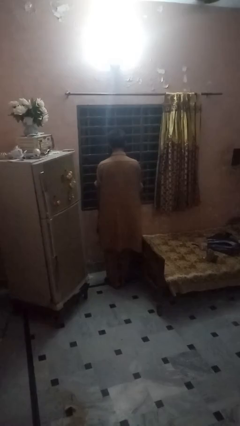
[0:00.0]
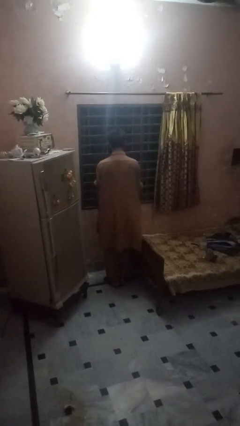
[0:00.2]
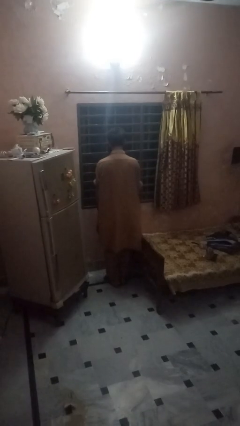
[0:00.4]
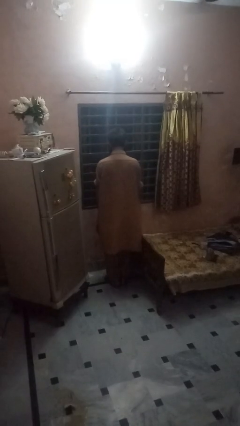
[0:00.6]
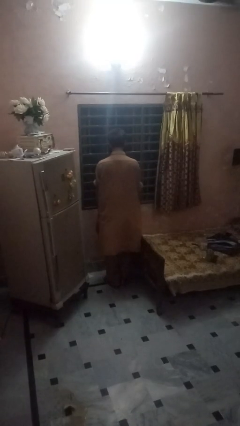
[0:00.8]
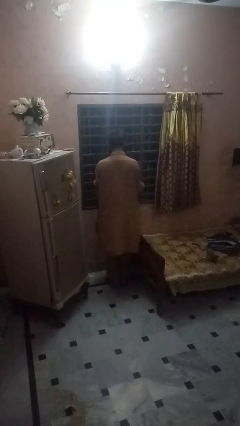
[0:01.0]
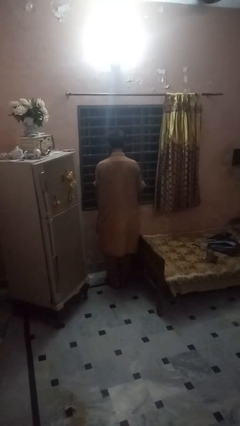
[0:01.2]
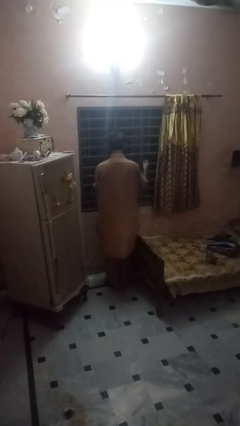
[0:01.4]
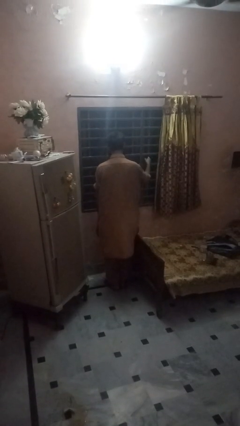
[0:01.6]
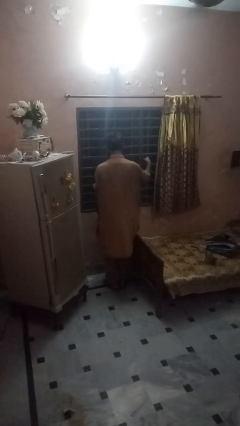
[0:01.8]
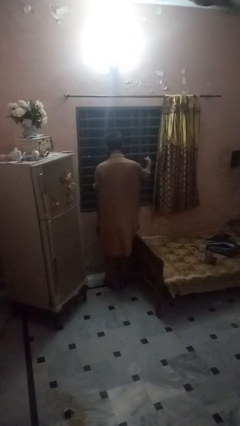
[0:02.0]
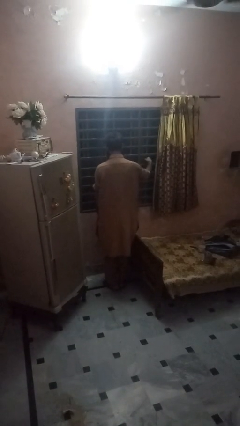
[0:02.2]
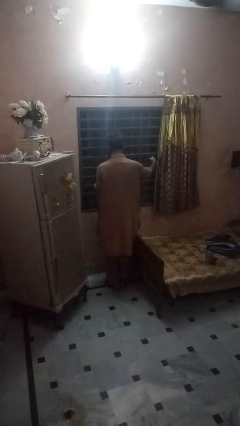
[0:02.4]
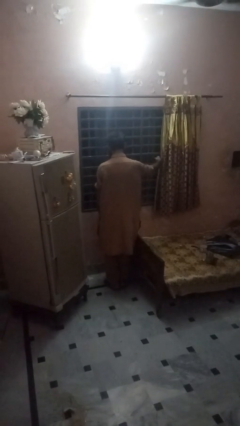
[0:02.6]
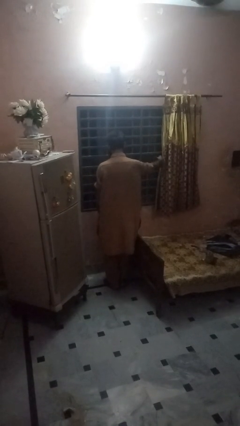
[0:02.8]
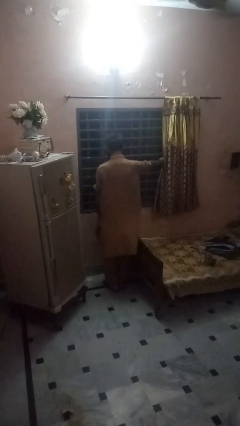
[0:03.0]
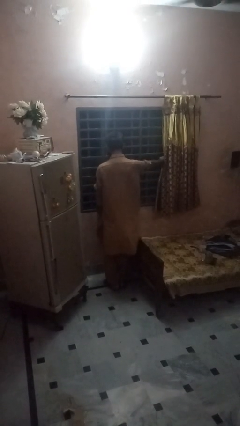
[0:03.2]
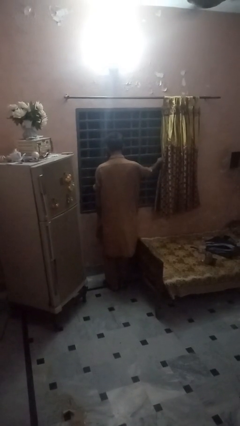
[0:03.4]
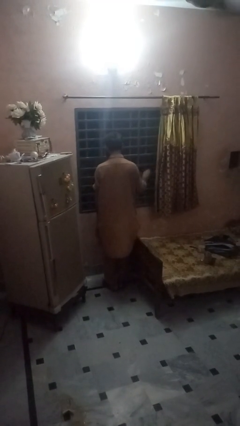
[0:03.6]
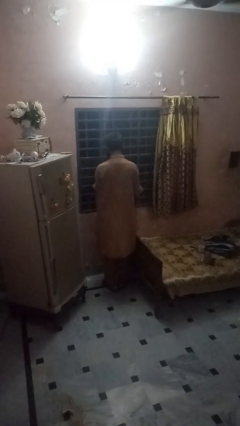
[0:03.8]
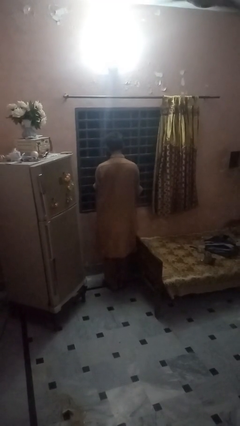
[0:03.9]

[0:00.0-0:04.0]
person opens home window

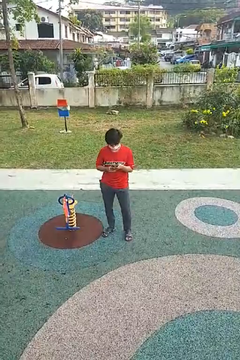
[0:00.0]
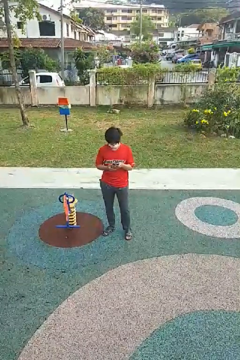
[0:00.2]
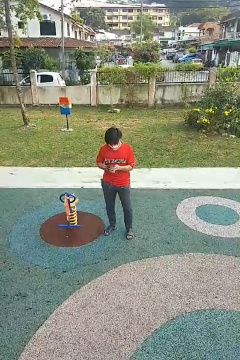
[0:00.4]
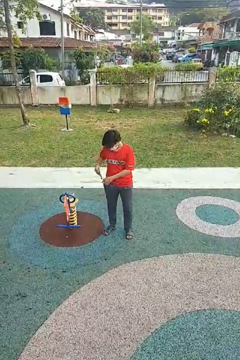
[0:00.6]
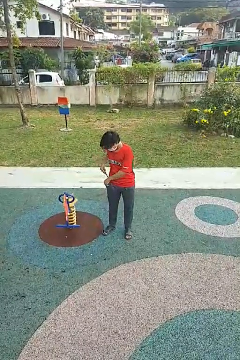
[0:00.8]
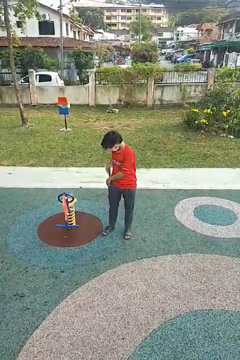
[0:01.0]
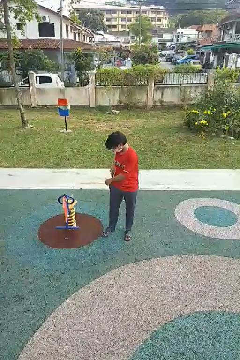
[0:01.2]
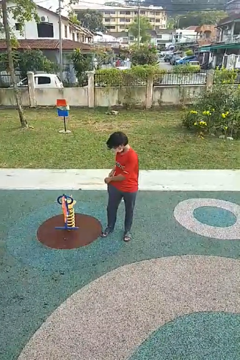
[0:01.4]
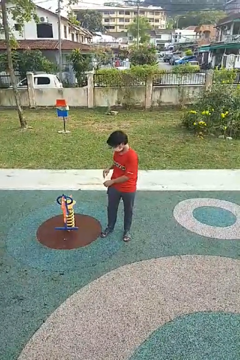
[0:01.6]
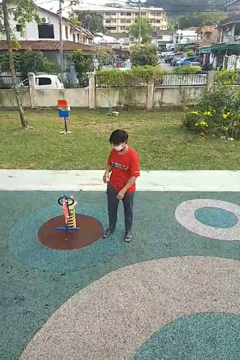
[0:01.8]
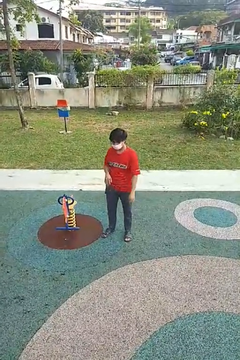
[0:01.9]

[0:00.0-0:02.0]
person puts phone into pocket

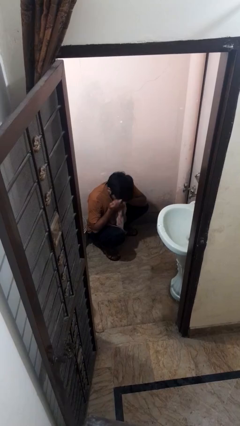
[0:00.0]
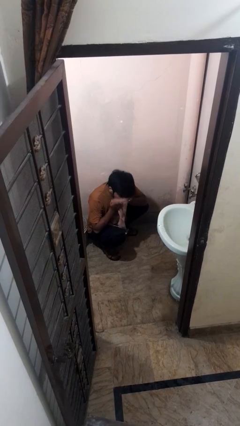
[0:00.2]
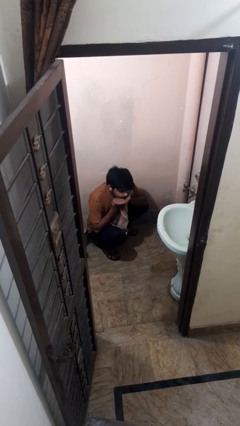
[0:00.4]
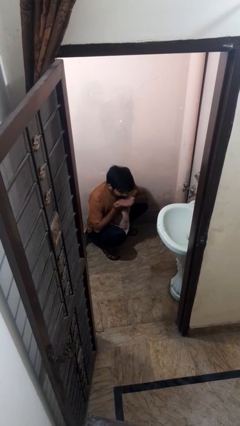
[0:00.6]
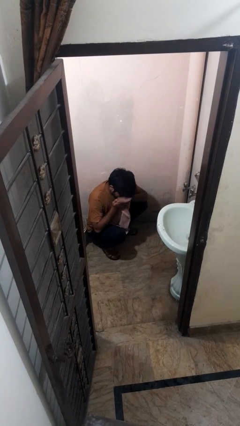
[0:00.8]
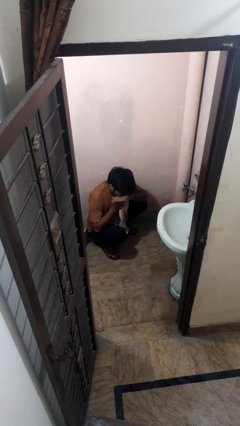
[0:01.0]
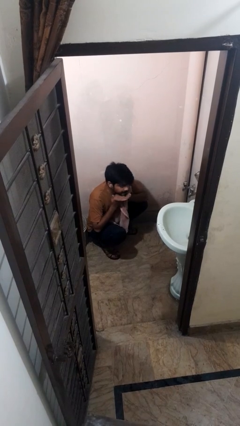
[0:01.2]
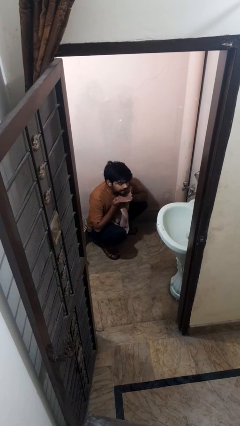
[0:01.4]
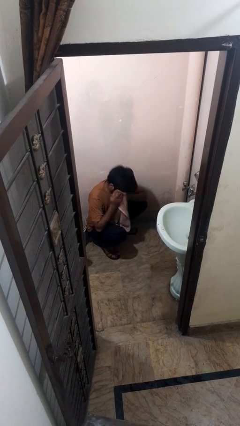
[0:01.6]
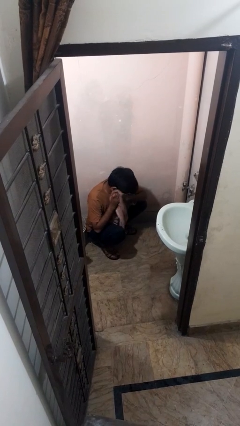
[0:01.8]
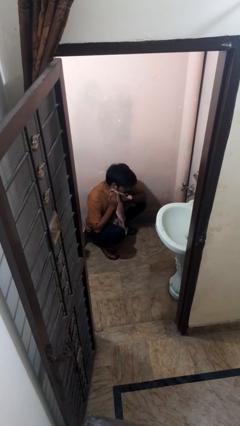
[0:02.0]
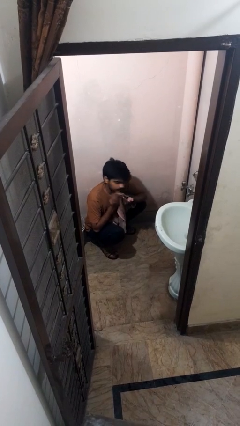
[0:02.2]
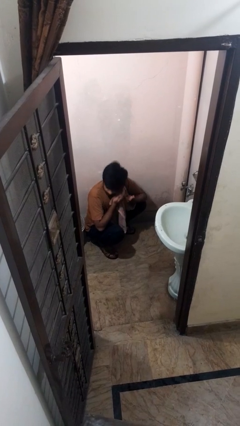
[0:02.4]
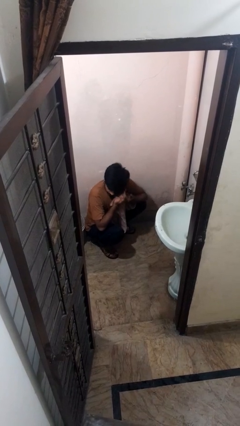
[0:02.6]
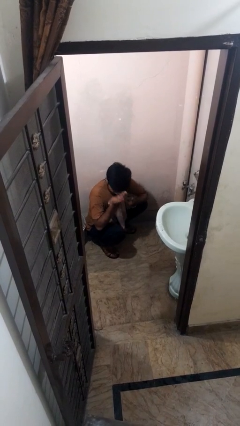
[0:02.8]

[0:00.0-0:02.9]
person picks up object from bed

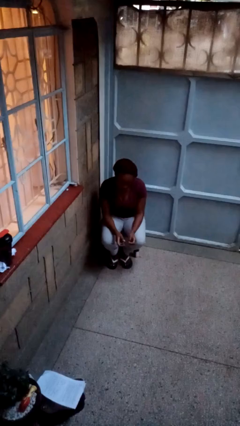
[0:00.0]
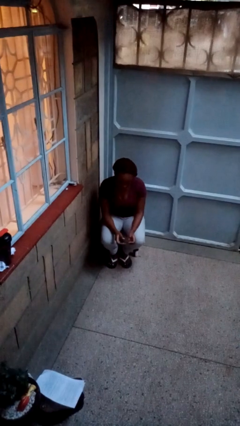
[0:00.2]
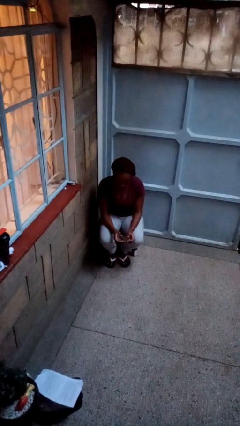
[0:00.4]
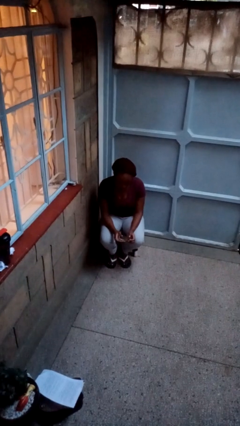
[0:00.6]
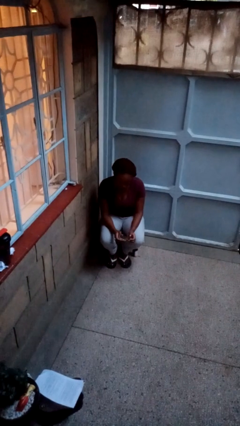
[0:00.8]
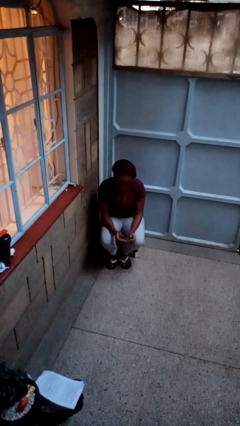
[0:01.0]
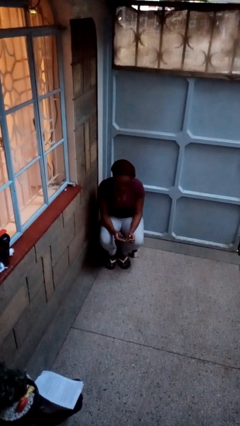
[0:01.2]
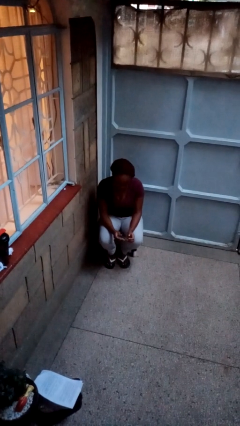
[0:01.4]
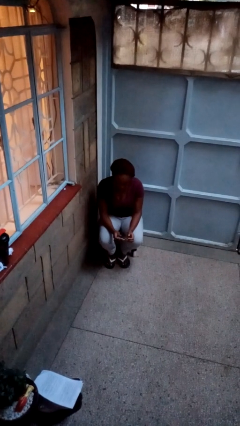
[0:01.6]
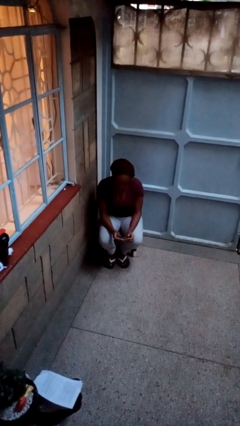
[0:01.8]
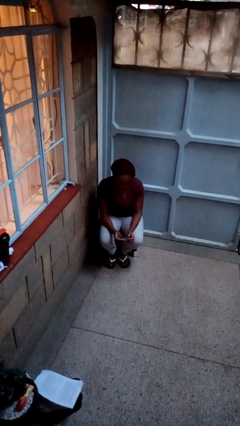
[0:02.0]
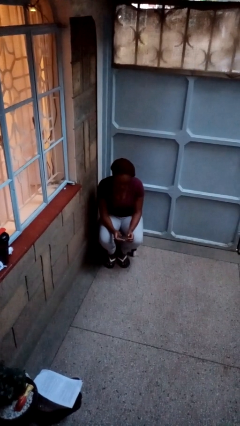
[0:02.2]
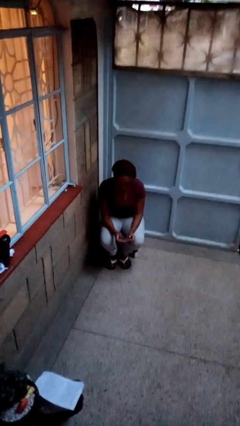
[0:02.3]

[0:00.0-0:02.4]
person clips fingernails

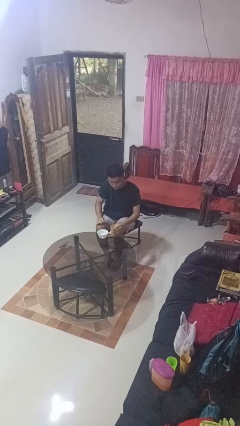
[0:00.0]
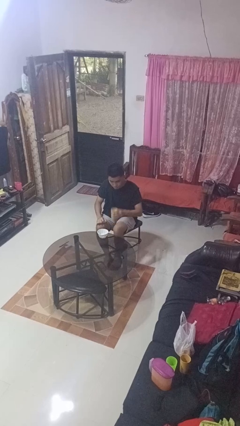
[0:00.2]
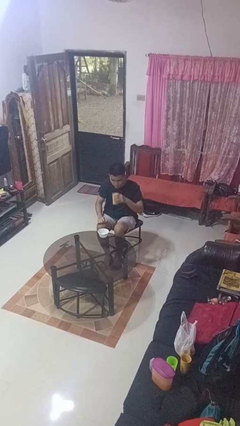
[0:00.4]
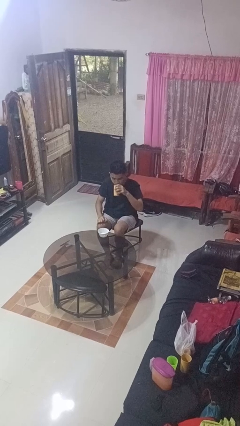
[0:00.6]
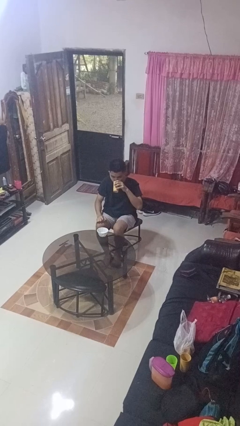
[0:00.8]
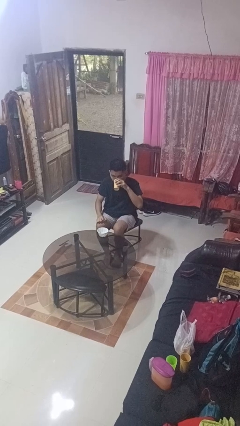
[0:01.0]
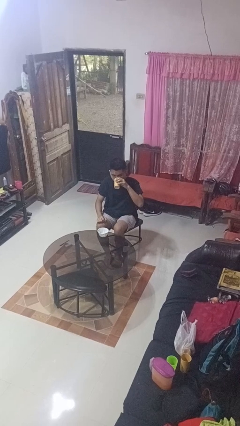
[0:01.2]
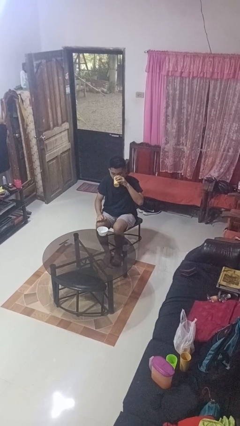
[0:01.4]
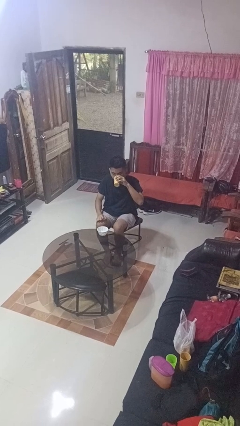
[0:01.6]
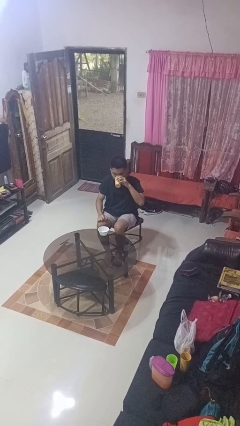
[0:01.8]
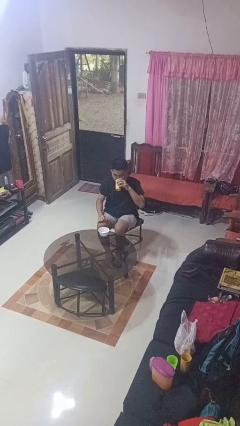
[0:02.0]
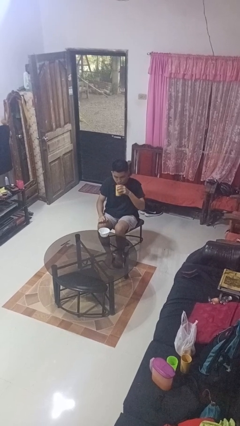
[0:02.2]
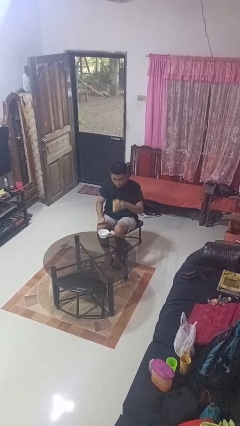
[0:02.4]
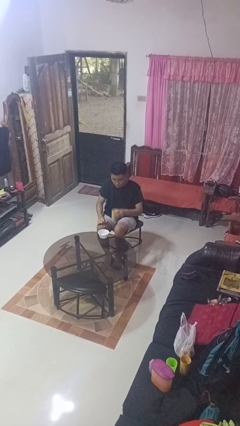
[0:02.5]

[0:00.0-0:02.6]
person drinks from cup

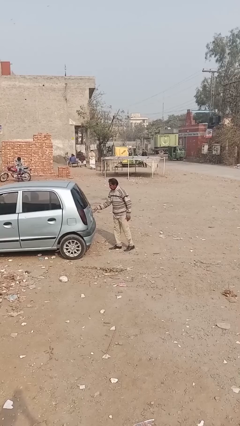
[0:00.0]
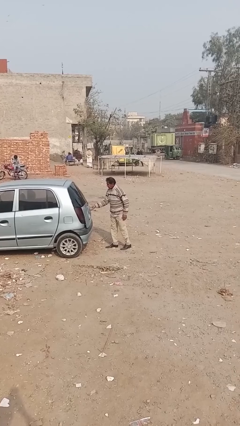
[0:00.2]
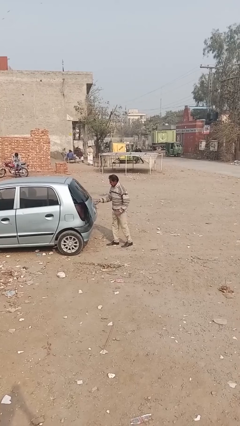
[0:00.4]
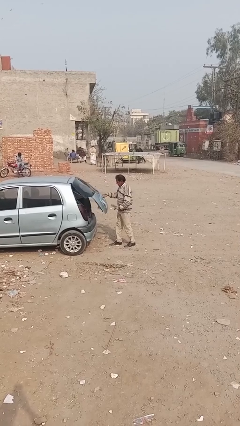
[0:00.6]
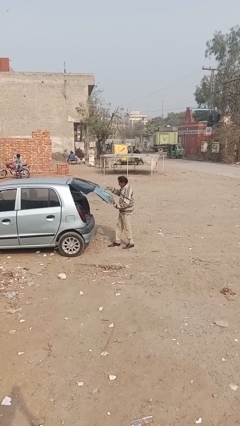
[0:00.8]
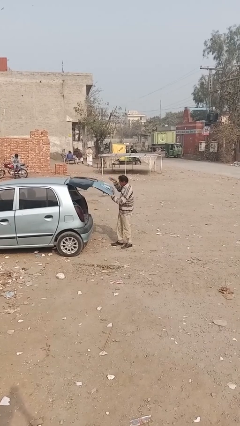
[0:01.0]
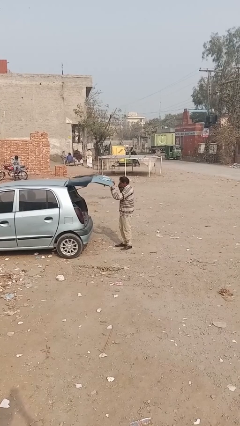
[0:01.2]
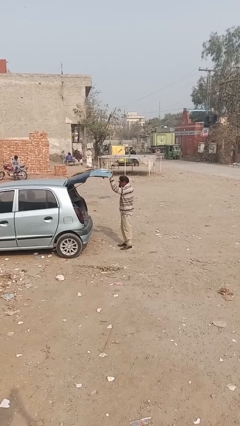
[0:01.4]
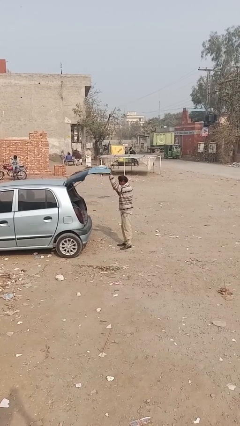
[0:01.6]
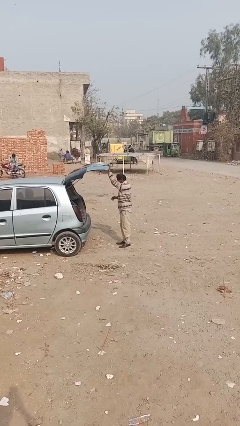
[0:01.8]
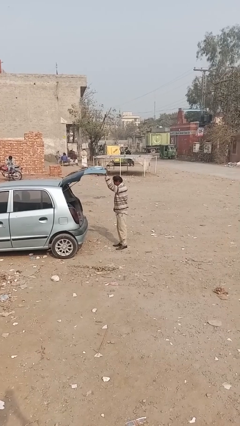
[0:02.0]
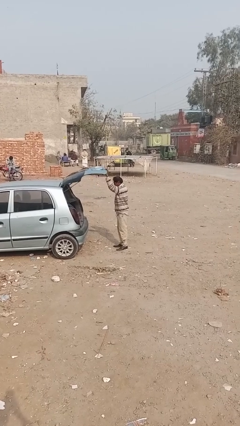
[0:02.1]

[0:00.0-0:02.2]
person opens car trunk

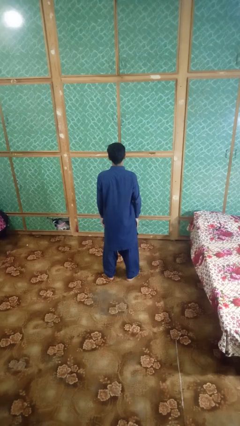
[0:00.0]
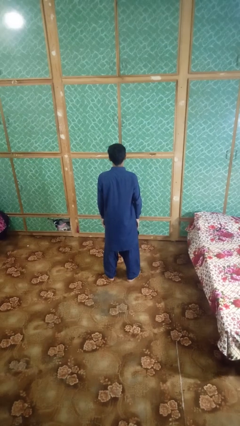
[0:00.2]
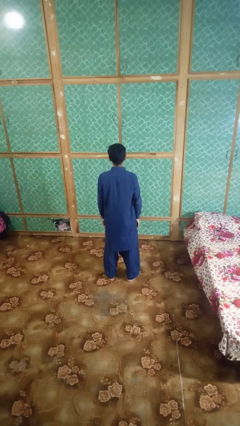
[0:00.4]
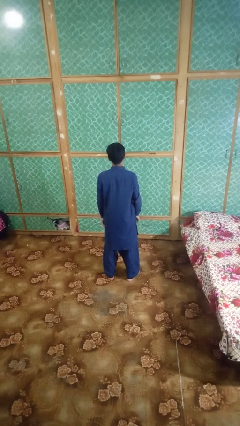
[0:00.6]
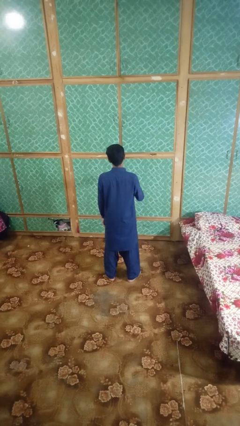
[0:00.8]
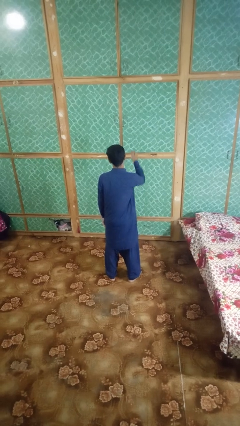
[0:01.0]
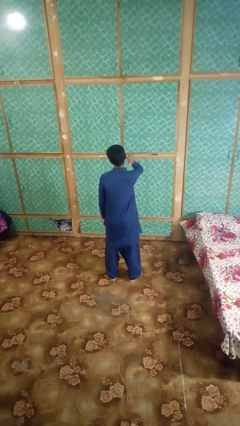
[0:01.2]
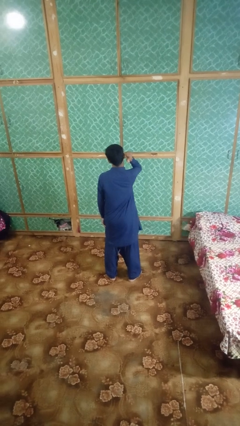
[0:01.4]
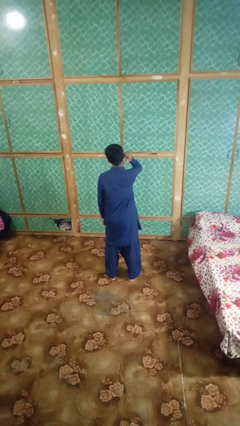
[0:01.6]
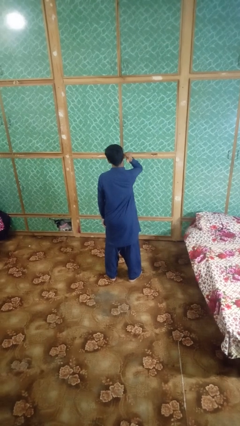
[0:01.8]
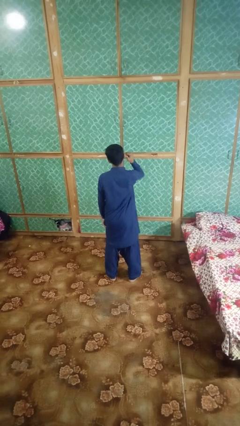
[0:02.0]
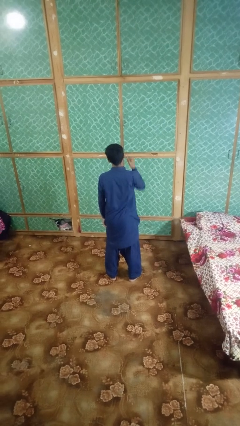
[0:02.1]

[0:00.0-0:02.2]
person gestures behind me
